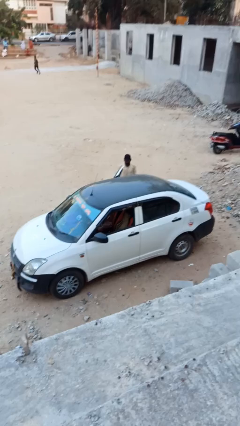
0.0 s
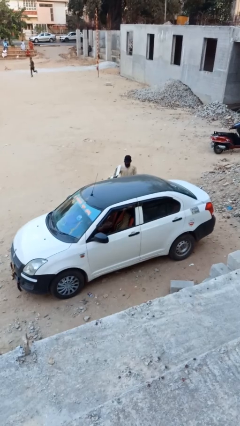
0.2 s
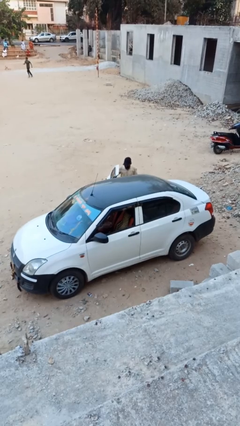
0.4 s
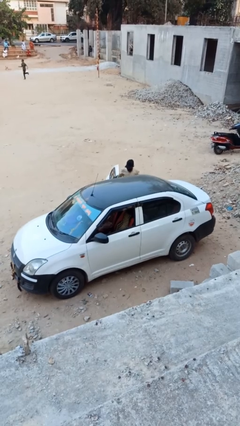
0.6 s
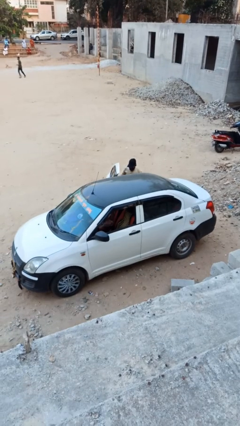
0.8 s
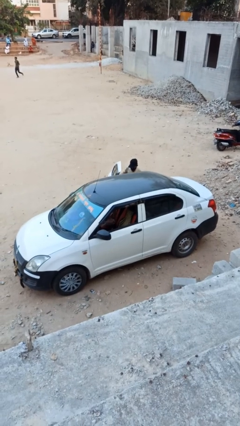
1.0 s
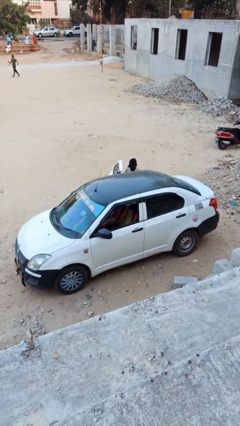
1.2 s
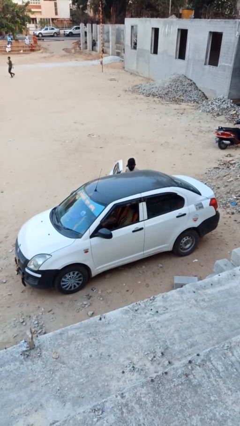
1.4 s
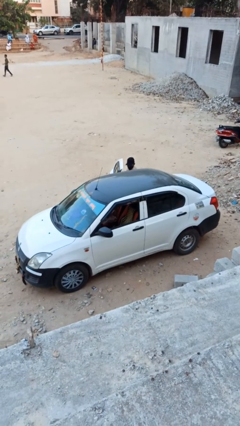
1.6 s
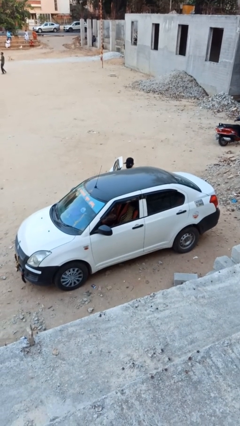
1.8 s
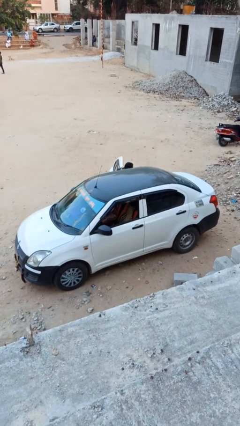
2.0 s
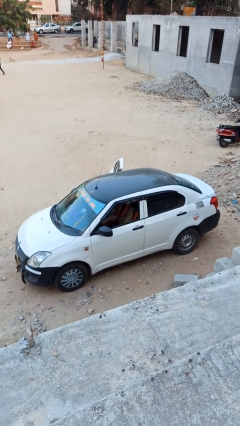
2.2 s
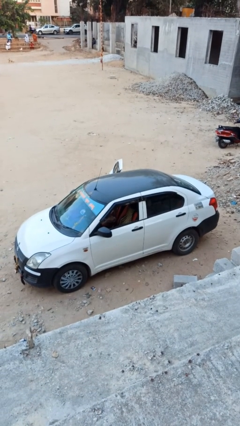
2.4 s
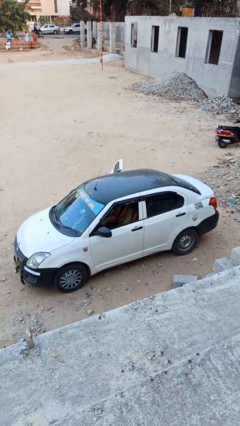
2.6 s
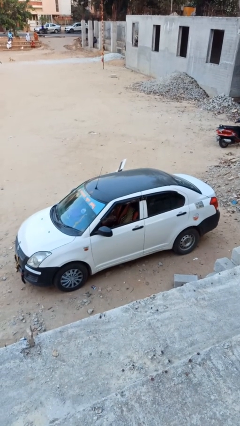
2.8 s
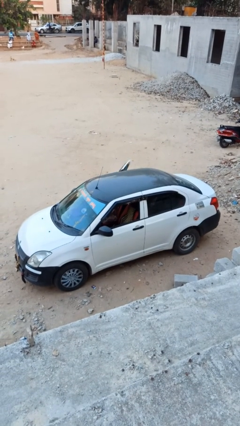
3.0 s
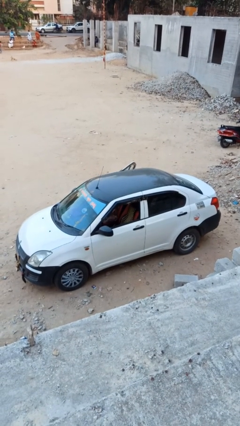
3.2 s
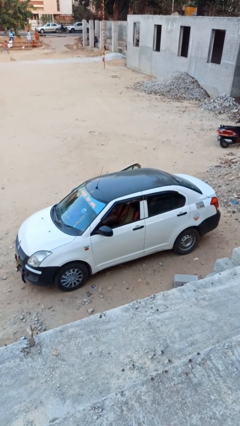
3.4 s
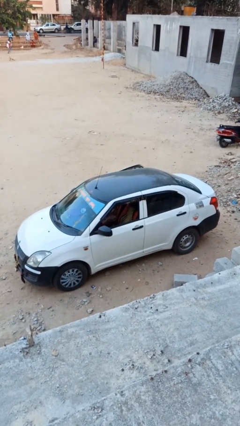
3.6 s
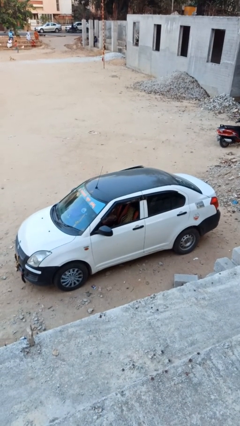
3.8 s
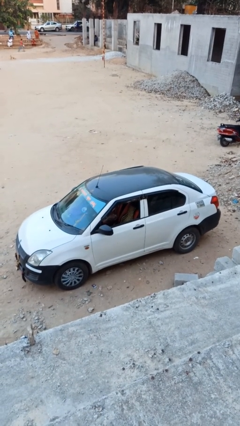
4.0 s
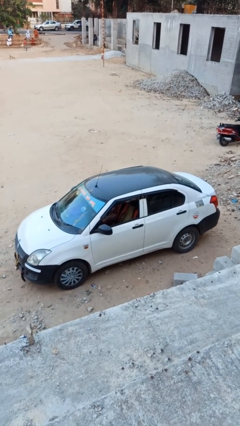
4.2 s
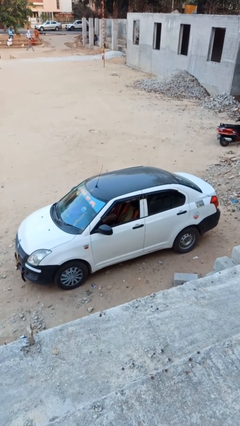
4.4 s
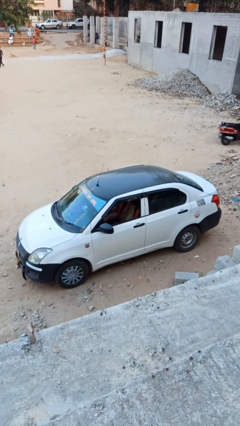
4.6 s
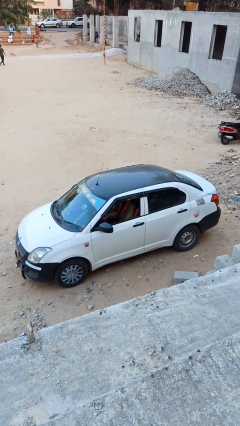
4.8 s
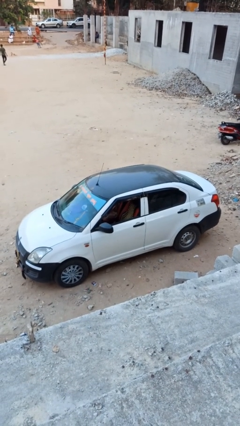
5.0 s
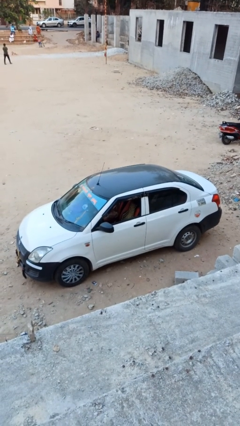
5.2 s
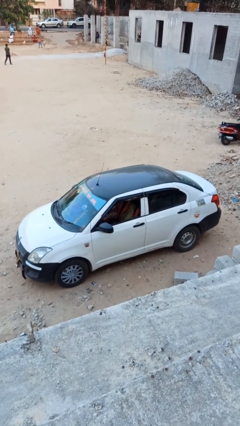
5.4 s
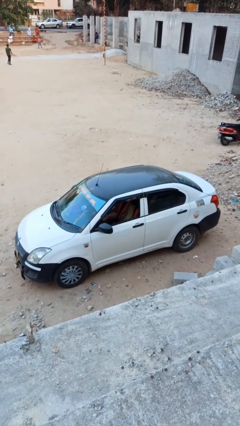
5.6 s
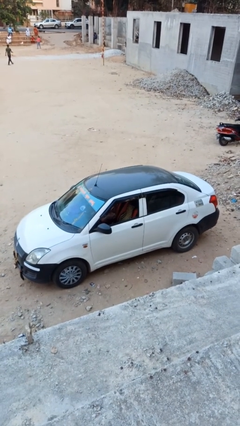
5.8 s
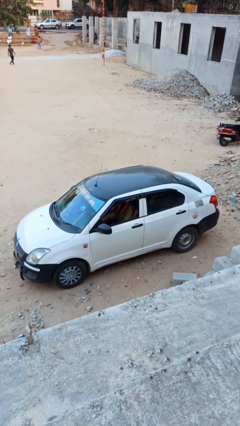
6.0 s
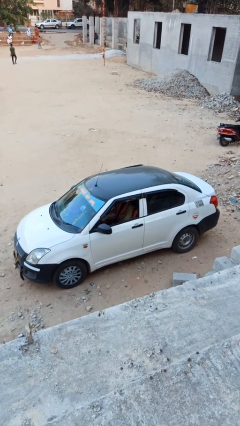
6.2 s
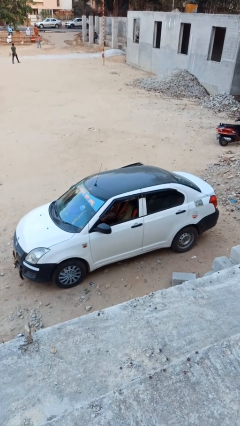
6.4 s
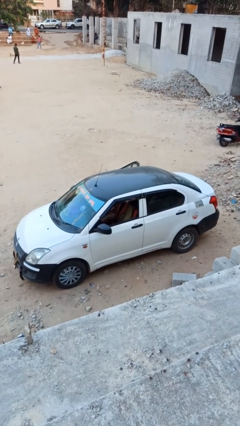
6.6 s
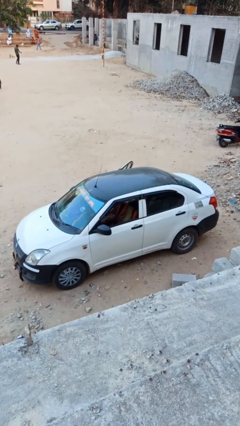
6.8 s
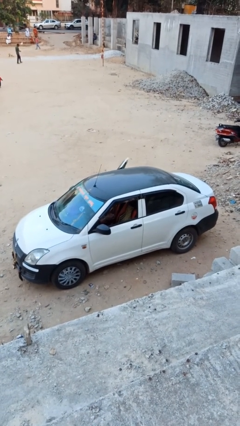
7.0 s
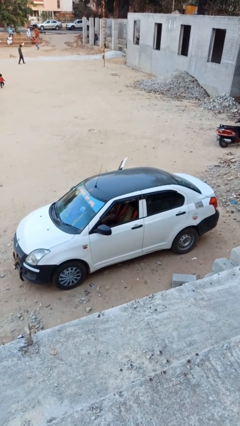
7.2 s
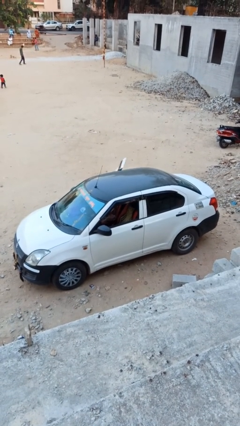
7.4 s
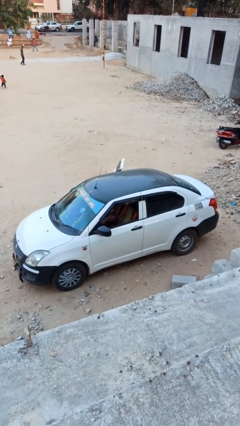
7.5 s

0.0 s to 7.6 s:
car picks up person

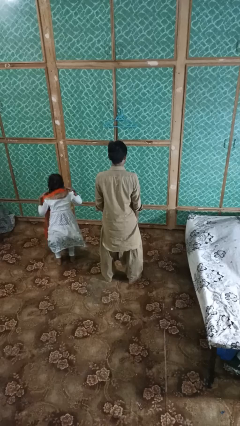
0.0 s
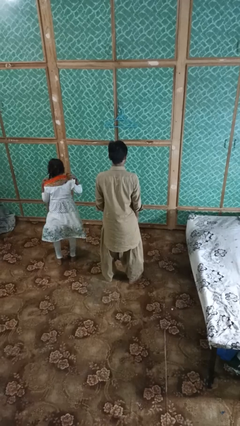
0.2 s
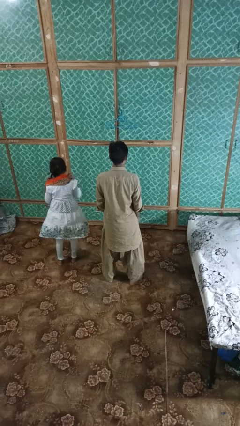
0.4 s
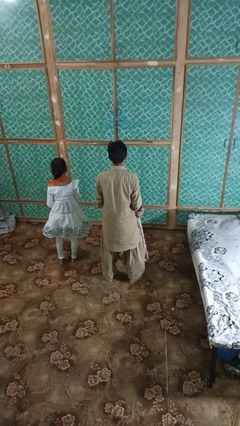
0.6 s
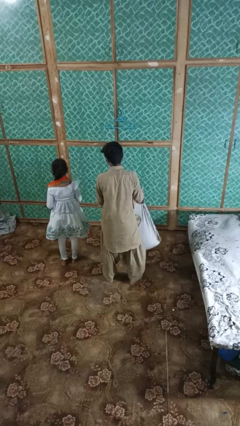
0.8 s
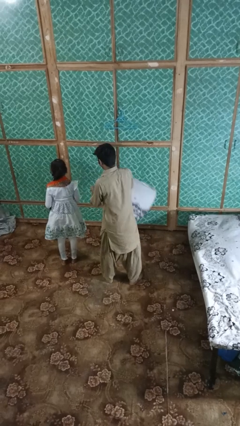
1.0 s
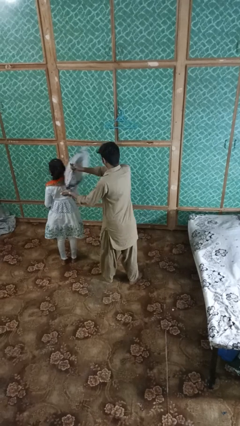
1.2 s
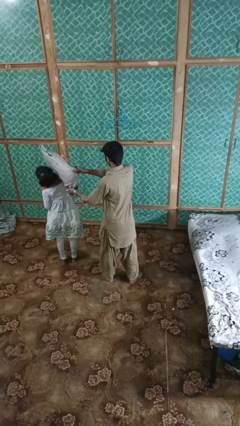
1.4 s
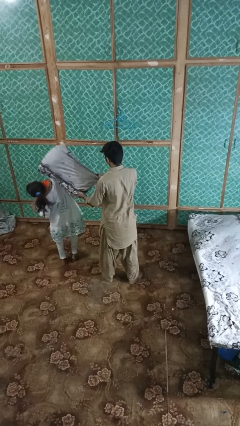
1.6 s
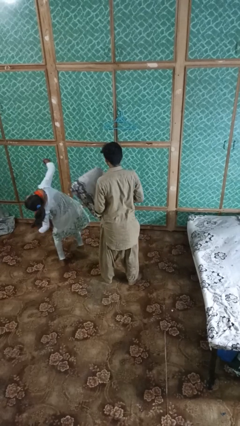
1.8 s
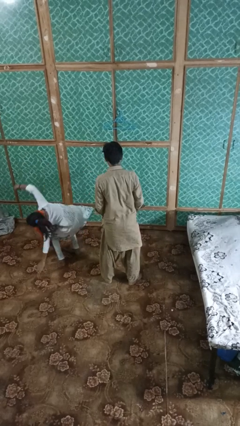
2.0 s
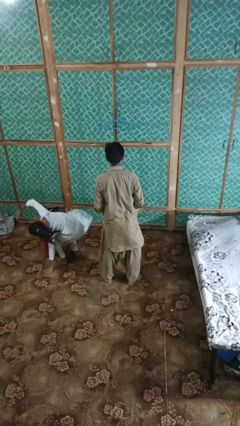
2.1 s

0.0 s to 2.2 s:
person hits person with pillow

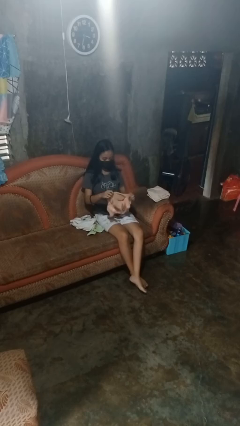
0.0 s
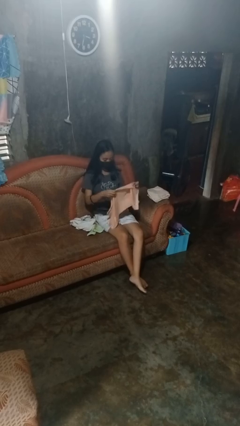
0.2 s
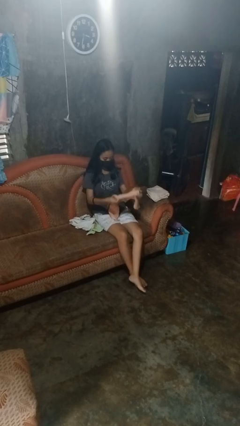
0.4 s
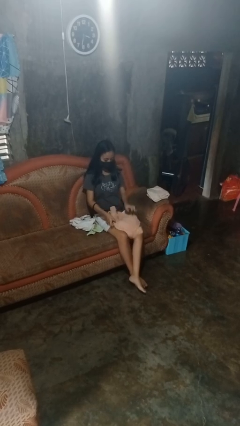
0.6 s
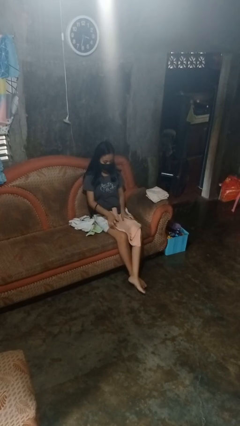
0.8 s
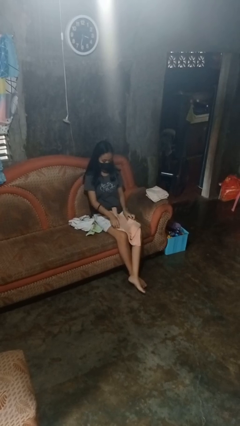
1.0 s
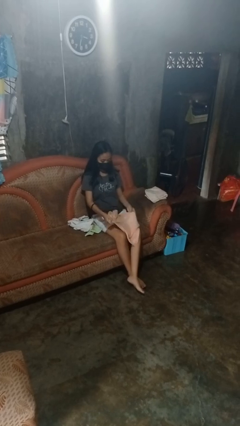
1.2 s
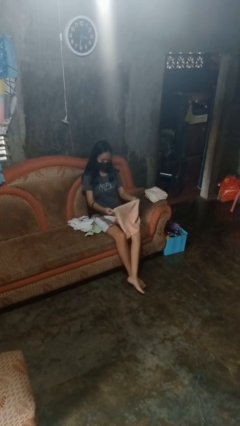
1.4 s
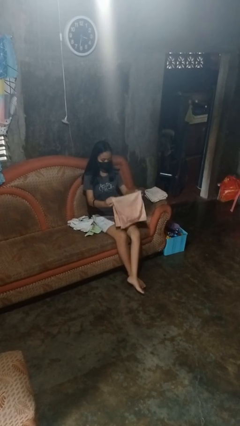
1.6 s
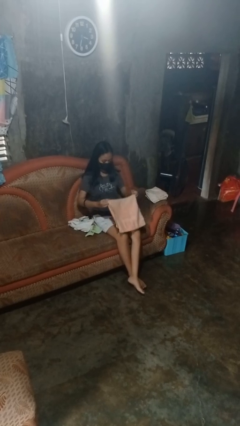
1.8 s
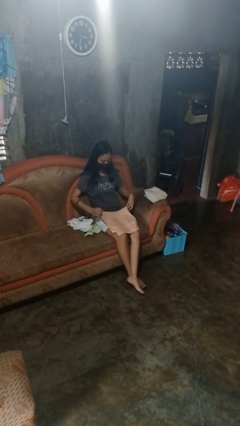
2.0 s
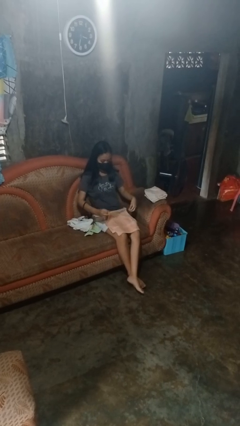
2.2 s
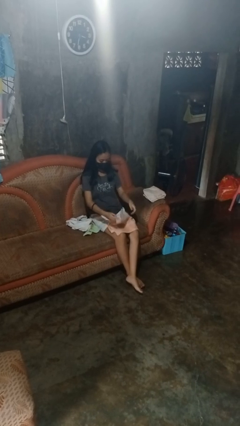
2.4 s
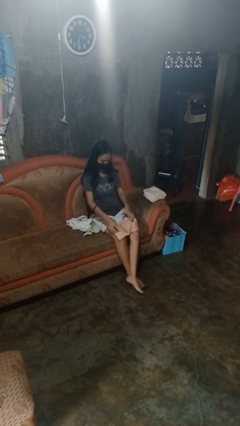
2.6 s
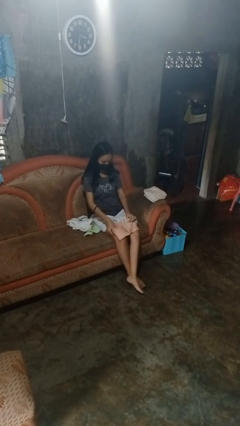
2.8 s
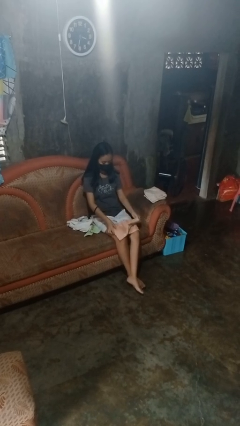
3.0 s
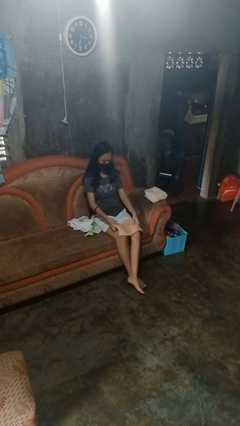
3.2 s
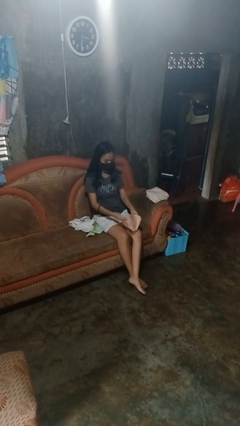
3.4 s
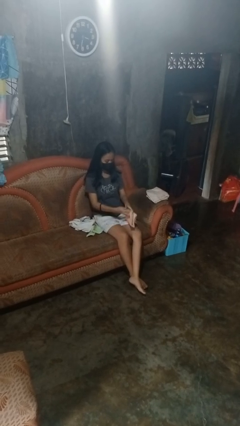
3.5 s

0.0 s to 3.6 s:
person folds towel

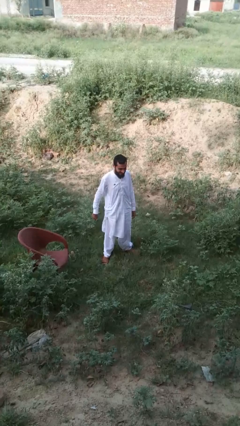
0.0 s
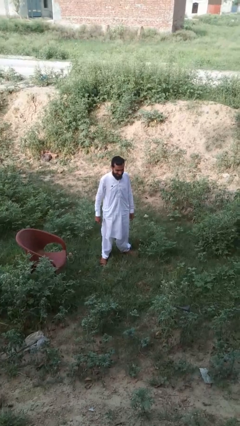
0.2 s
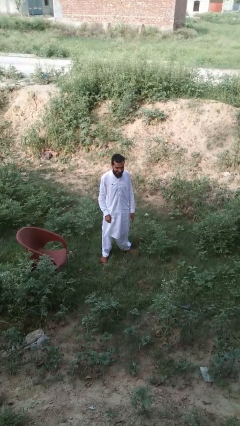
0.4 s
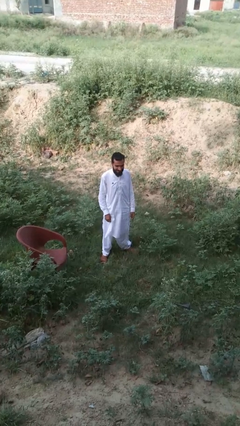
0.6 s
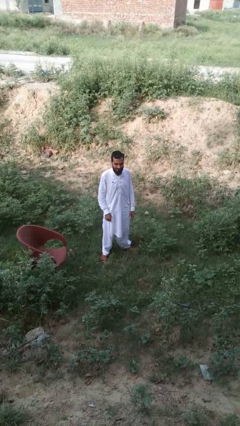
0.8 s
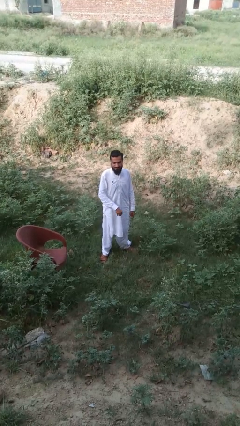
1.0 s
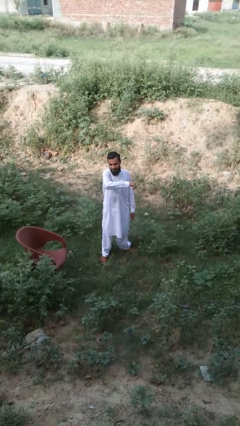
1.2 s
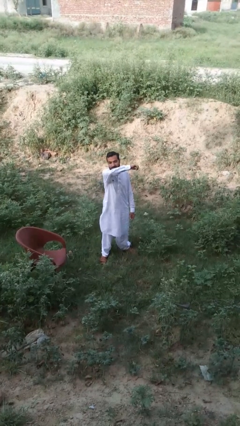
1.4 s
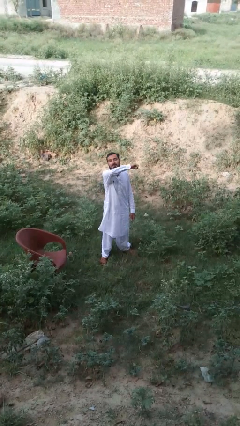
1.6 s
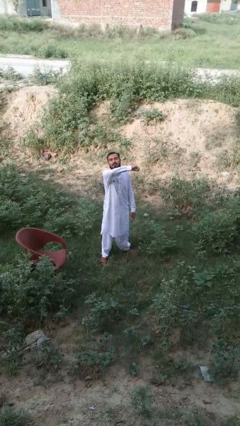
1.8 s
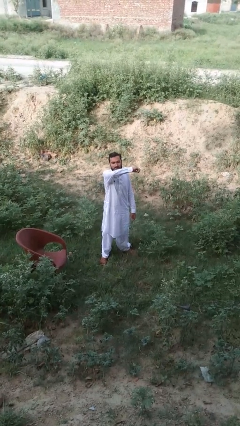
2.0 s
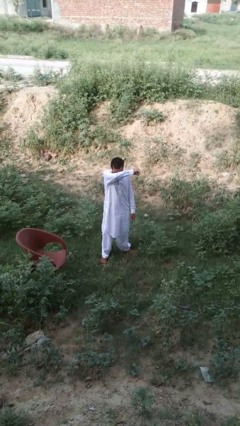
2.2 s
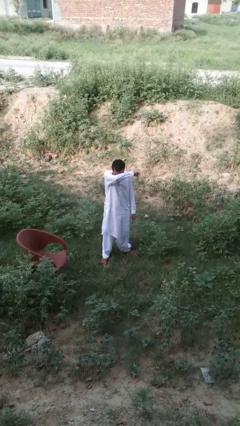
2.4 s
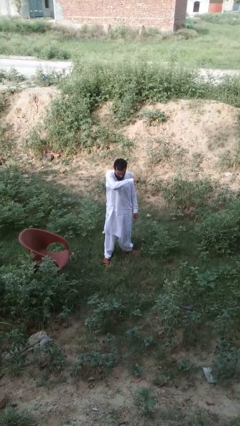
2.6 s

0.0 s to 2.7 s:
person sneezes into arm

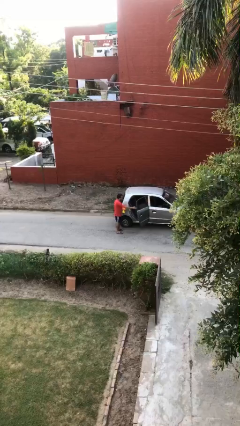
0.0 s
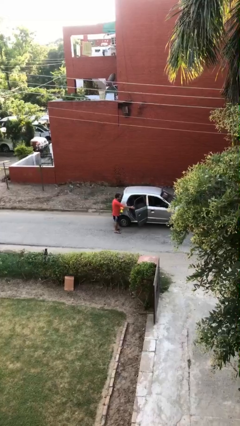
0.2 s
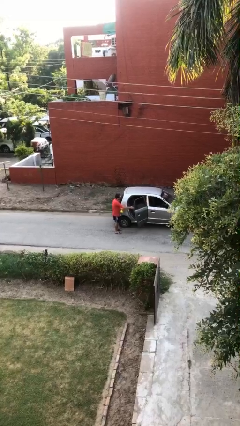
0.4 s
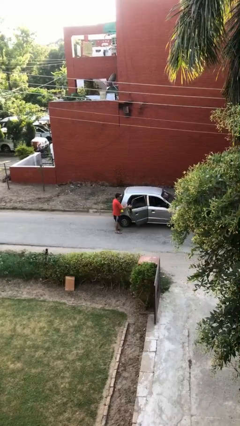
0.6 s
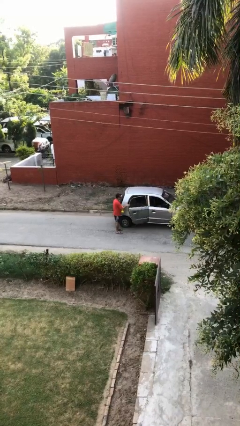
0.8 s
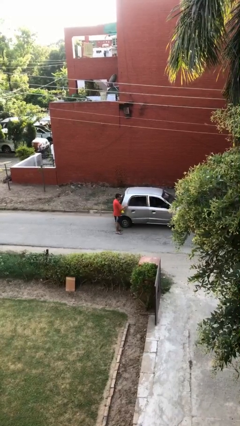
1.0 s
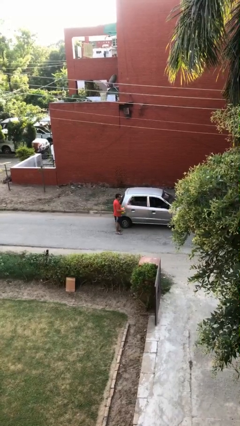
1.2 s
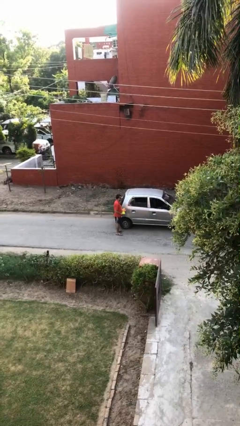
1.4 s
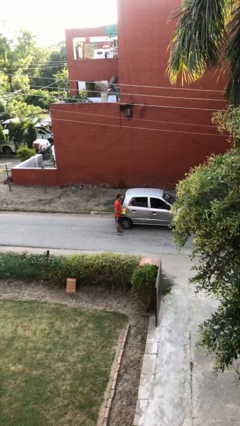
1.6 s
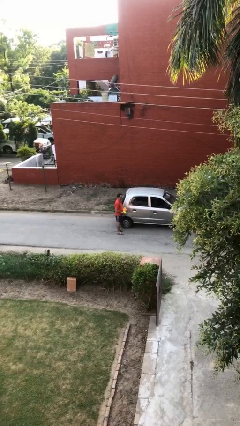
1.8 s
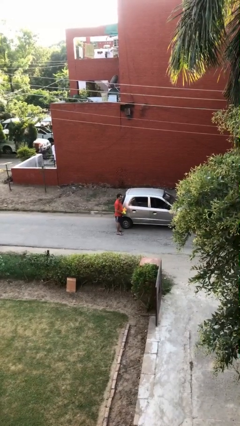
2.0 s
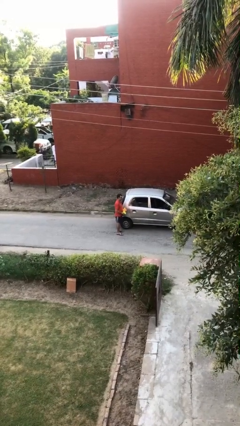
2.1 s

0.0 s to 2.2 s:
person closes car door
